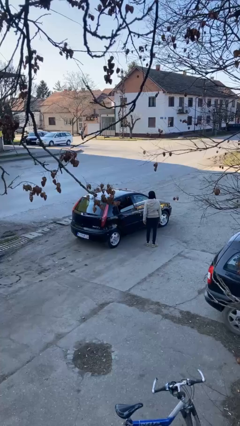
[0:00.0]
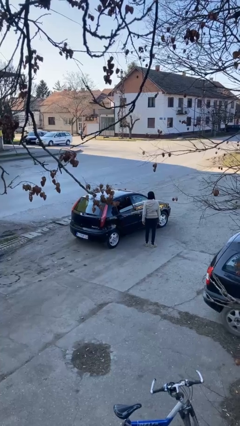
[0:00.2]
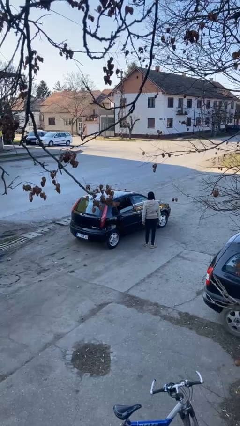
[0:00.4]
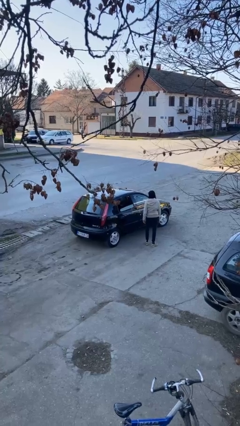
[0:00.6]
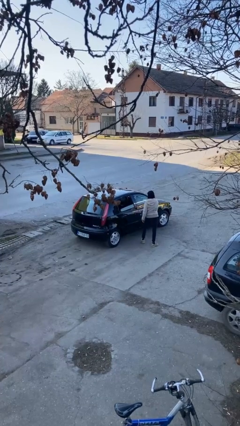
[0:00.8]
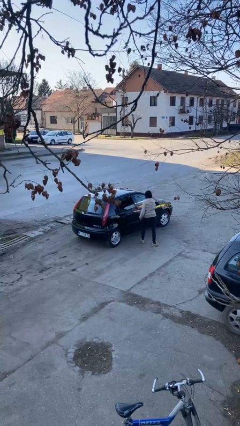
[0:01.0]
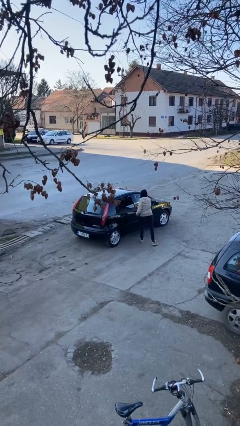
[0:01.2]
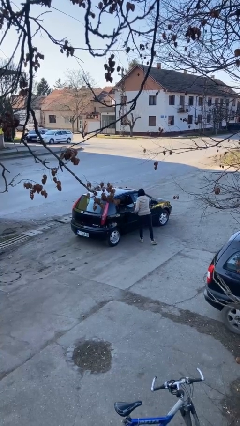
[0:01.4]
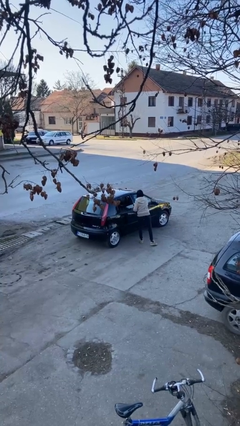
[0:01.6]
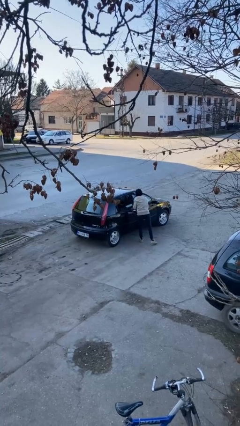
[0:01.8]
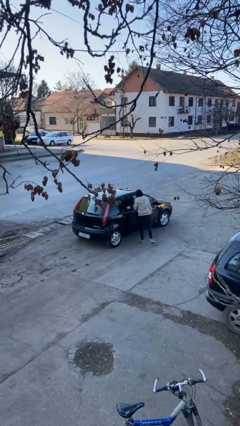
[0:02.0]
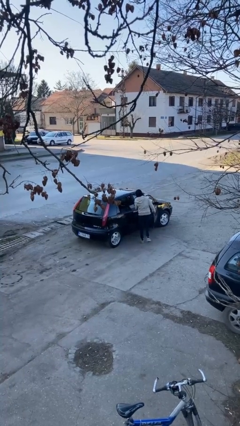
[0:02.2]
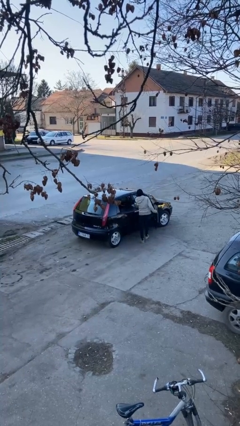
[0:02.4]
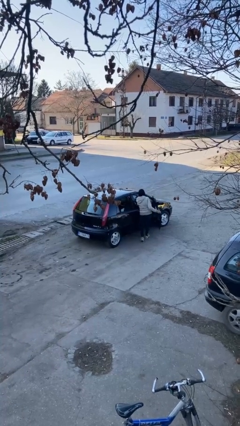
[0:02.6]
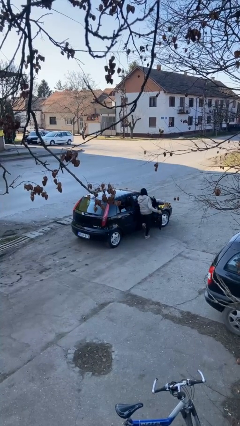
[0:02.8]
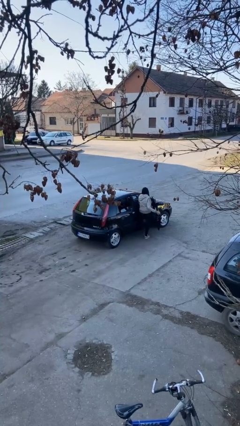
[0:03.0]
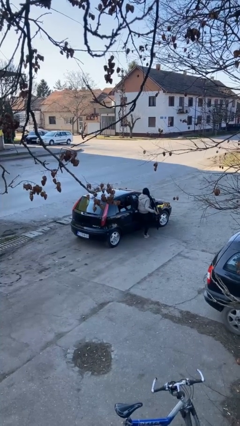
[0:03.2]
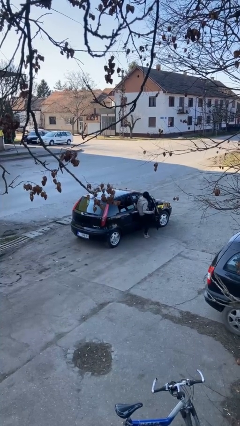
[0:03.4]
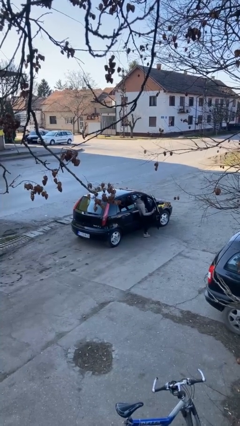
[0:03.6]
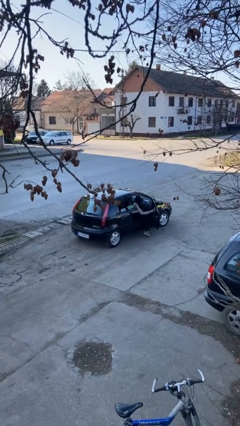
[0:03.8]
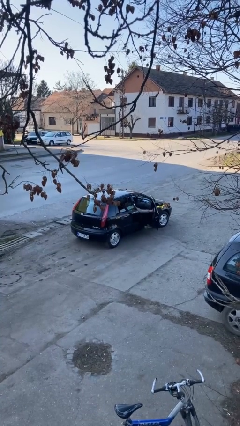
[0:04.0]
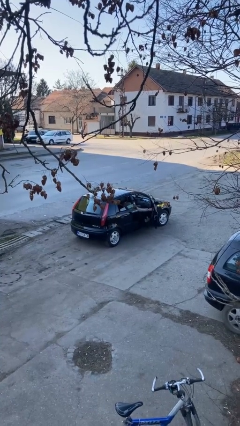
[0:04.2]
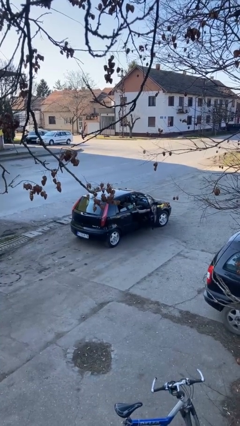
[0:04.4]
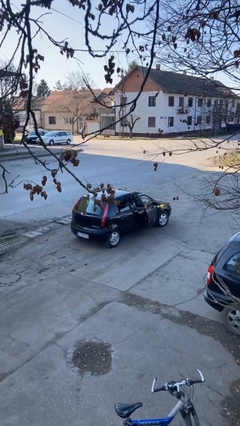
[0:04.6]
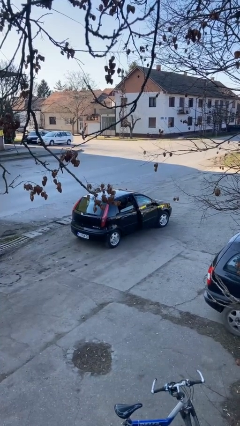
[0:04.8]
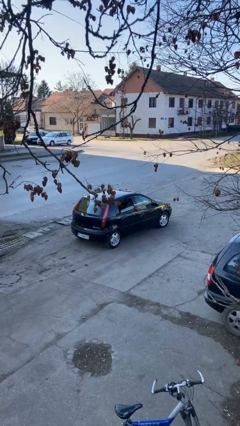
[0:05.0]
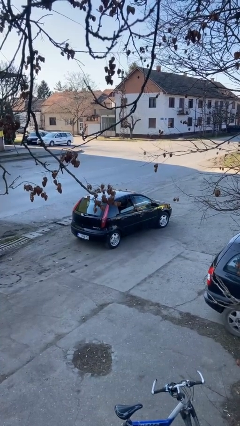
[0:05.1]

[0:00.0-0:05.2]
car picks up person

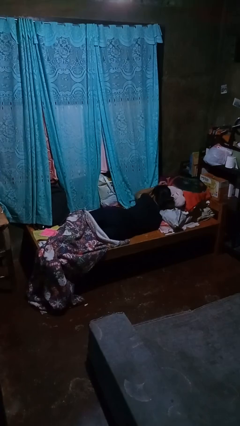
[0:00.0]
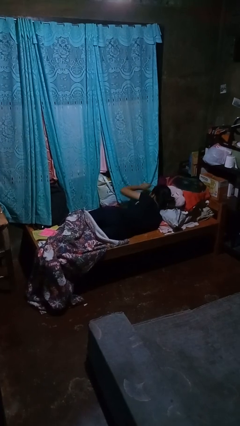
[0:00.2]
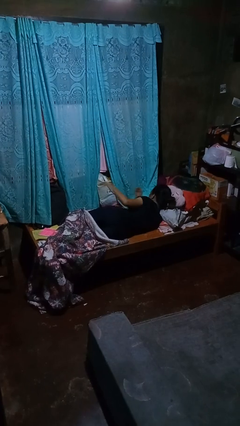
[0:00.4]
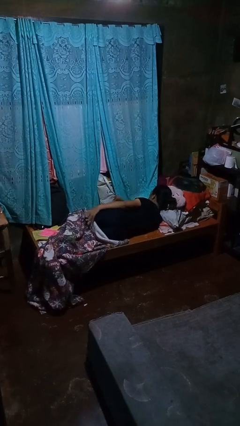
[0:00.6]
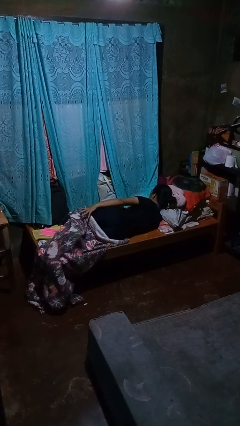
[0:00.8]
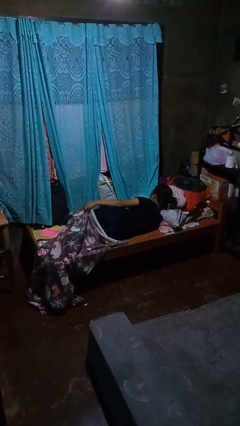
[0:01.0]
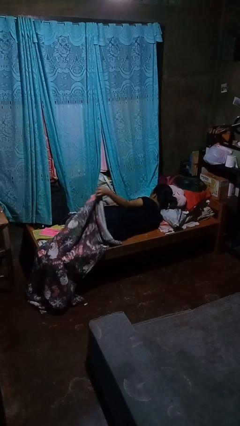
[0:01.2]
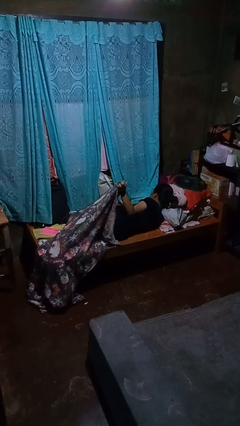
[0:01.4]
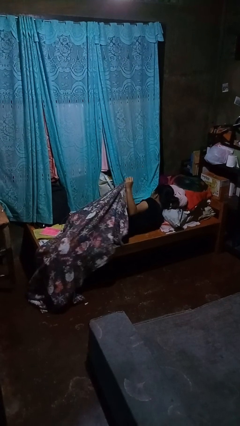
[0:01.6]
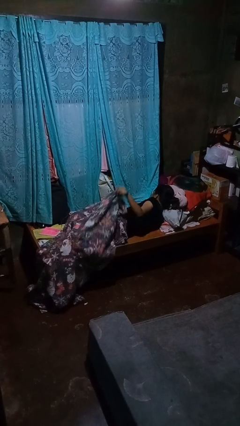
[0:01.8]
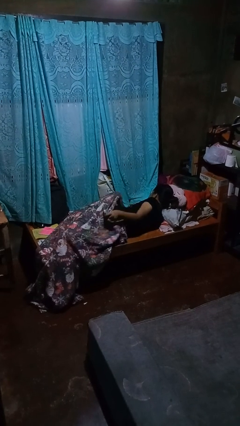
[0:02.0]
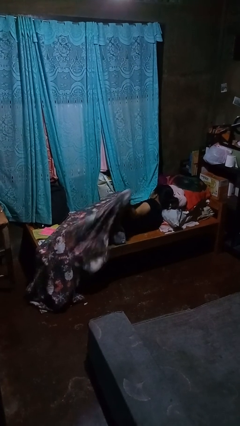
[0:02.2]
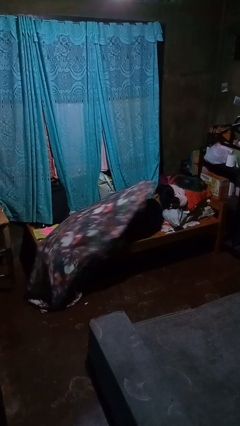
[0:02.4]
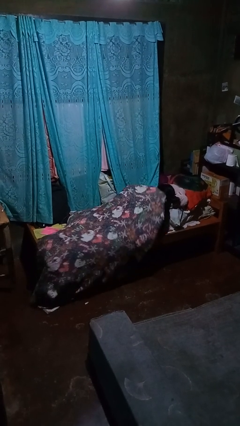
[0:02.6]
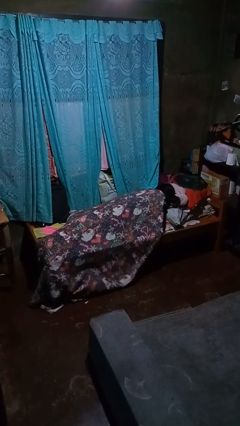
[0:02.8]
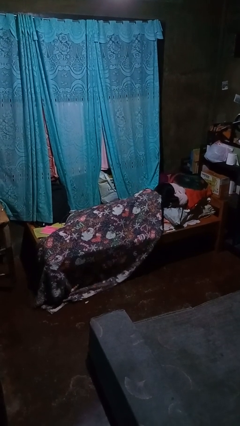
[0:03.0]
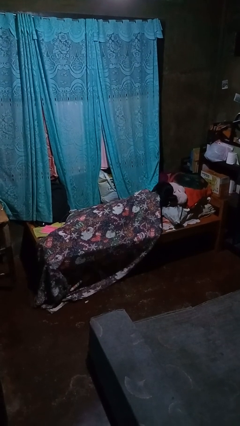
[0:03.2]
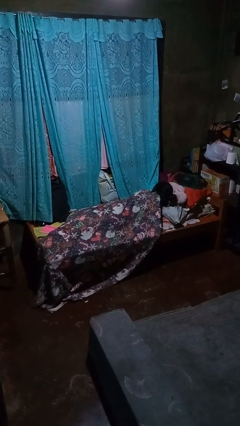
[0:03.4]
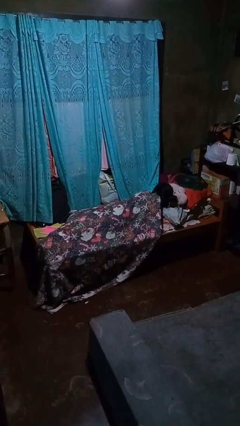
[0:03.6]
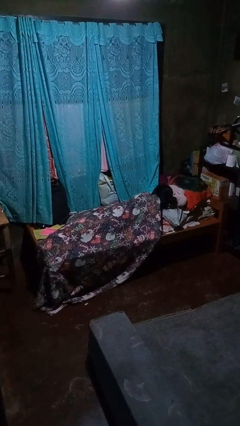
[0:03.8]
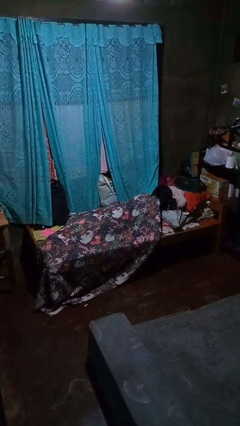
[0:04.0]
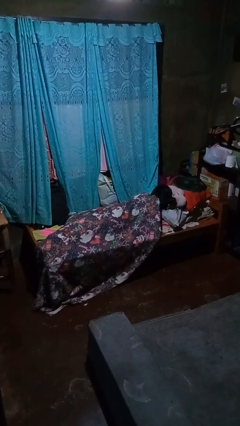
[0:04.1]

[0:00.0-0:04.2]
person covers with bedsheets

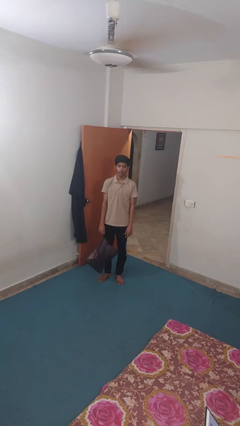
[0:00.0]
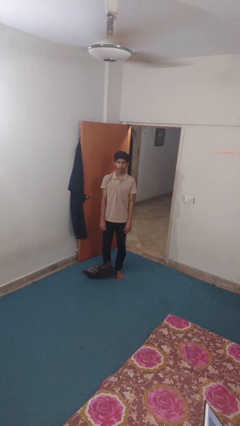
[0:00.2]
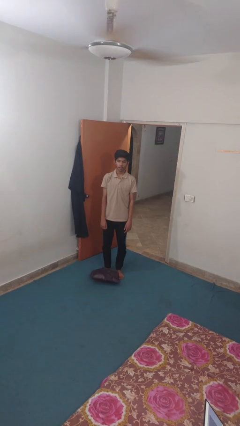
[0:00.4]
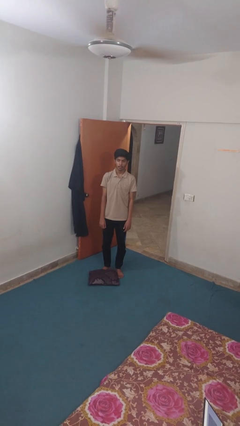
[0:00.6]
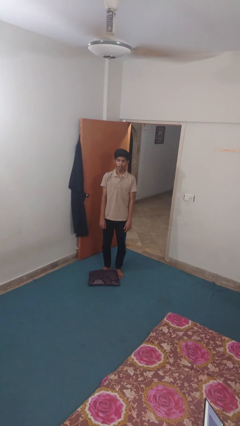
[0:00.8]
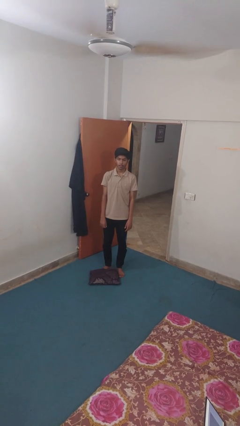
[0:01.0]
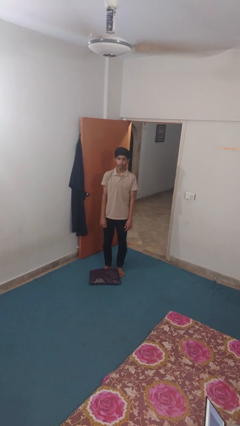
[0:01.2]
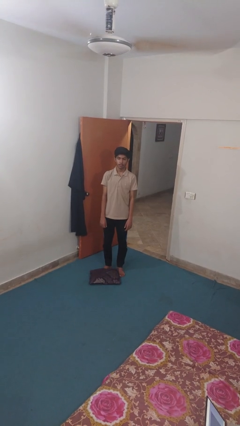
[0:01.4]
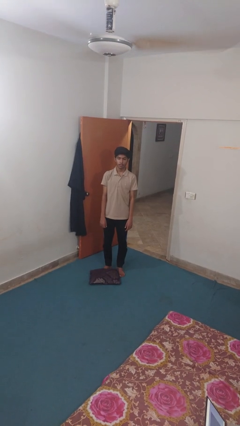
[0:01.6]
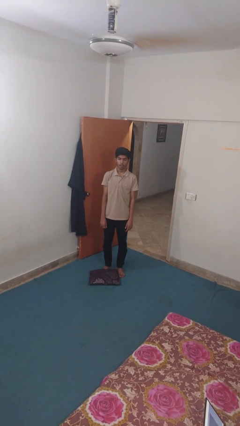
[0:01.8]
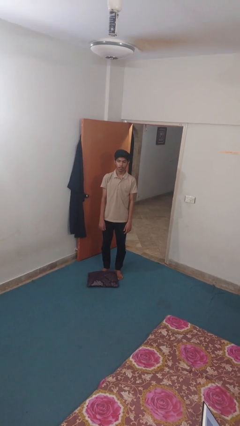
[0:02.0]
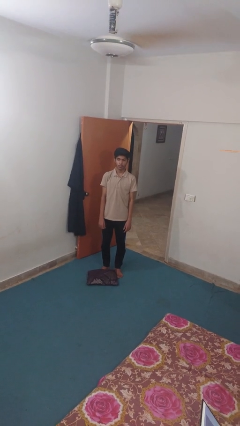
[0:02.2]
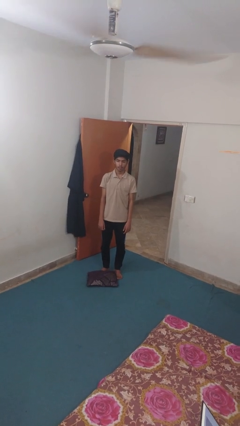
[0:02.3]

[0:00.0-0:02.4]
person drops object

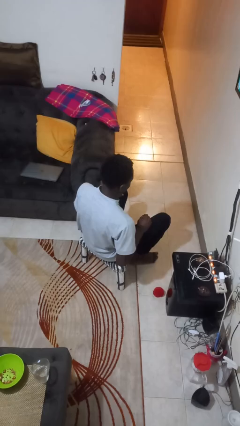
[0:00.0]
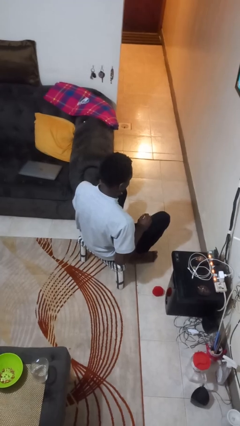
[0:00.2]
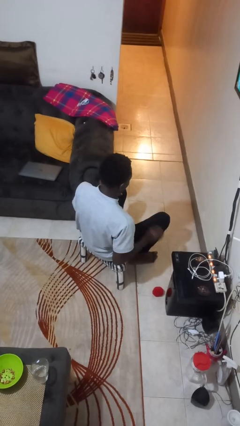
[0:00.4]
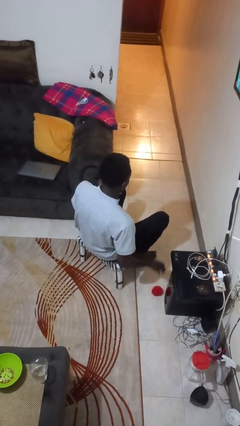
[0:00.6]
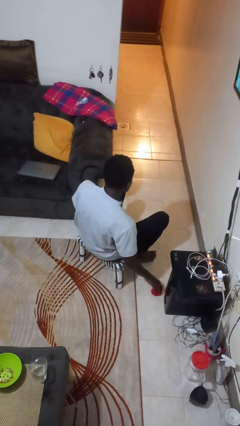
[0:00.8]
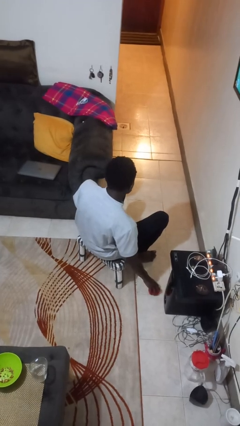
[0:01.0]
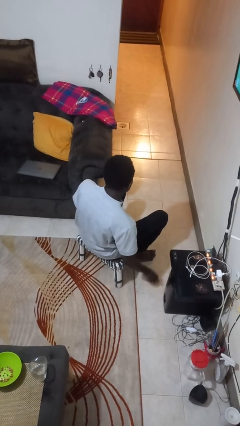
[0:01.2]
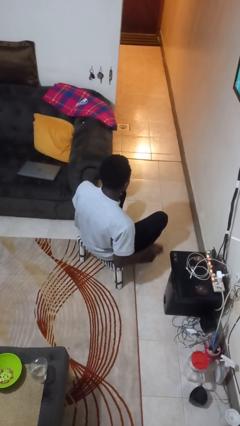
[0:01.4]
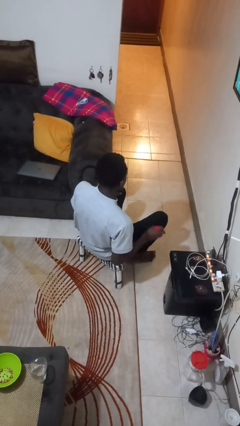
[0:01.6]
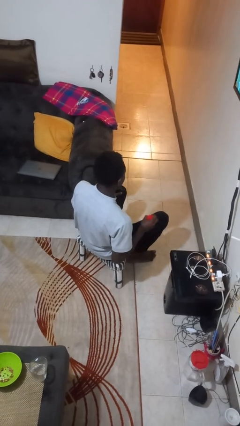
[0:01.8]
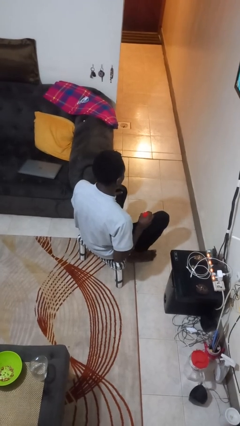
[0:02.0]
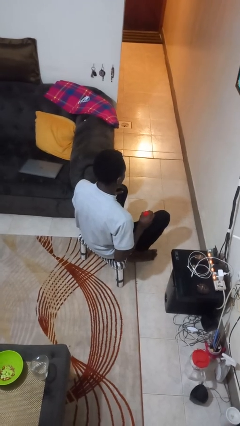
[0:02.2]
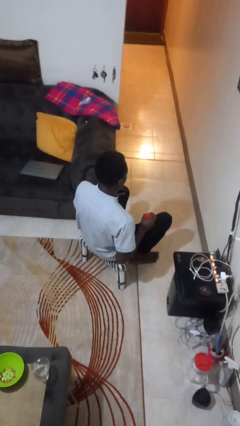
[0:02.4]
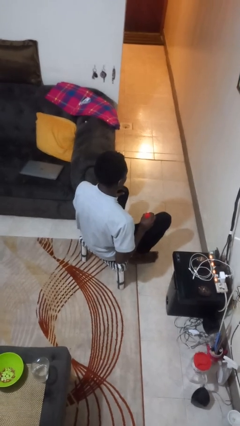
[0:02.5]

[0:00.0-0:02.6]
person picks up object from floor

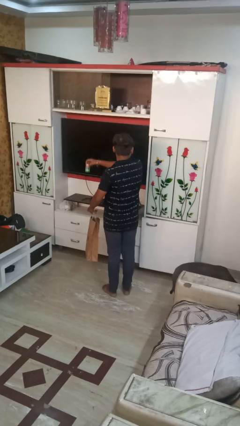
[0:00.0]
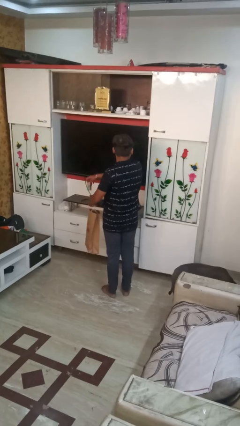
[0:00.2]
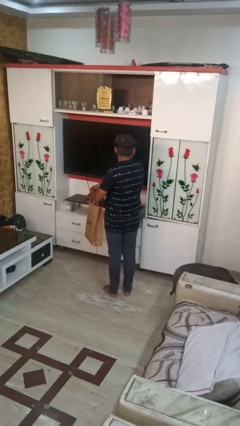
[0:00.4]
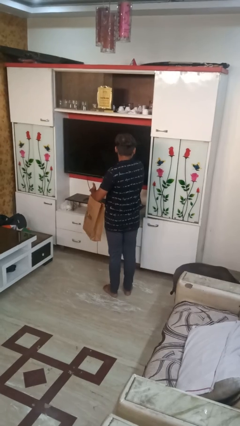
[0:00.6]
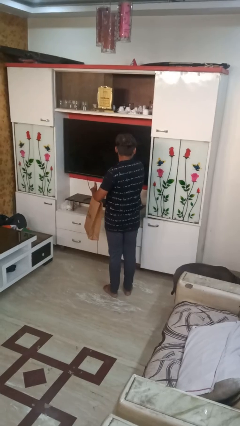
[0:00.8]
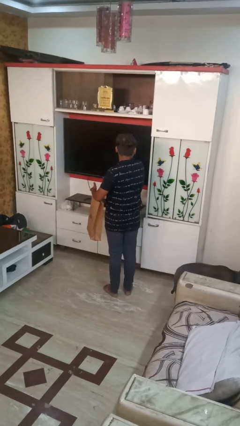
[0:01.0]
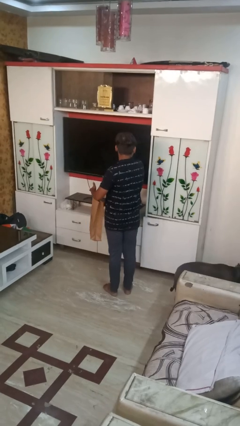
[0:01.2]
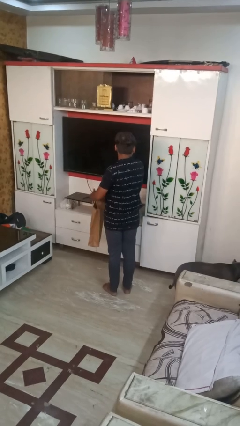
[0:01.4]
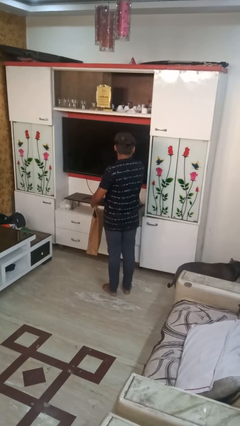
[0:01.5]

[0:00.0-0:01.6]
person puts object into bag

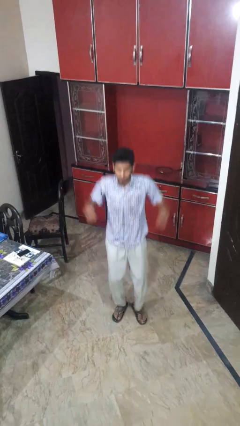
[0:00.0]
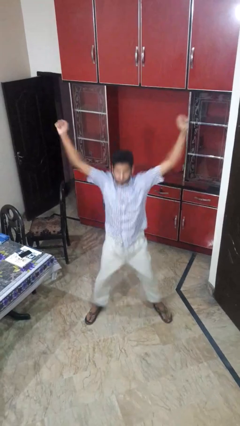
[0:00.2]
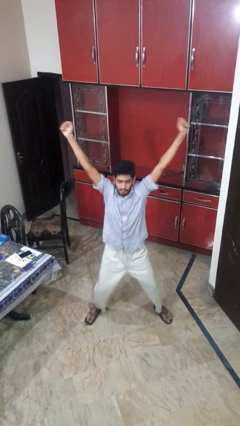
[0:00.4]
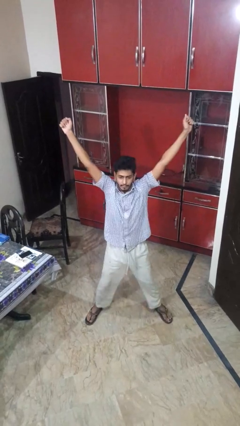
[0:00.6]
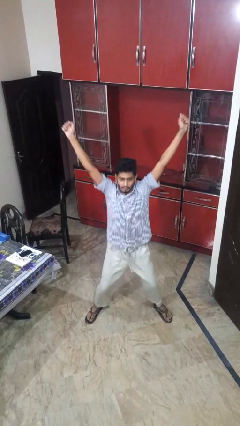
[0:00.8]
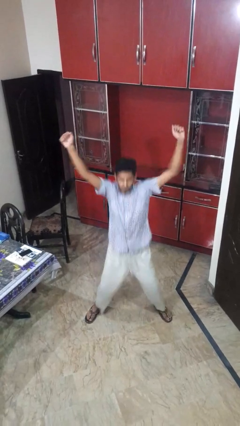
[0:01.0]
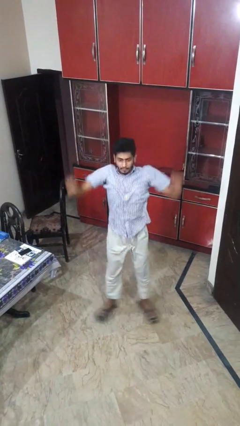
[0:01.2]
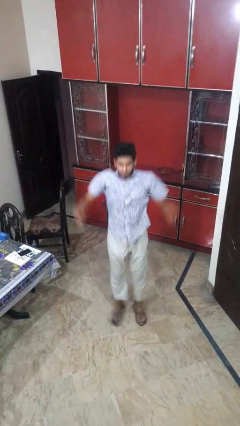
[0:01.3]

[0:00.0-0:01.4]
person exercises with jumping jacks

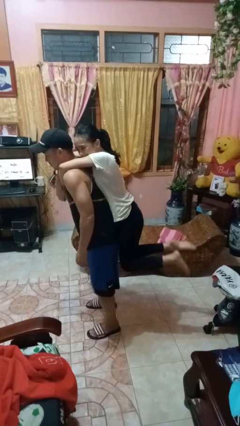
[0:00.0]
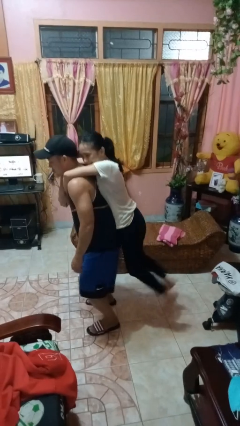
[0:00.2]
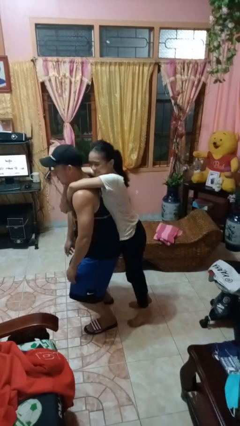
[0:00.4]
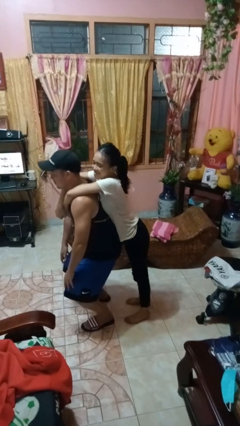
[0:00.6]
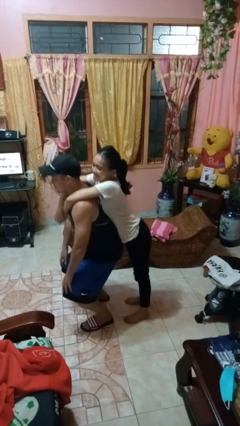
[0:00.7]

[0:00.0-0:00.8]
person puts down person
